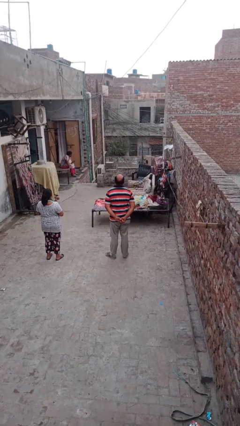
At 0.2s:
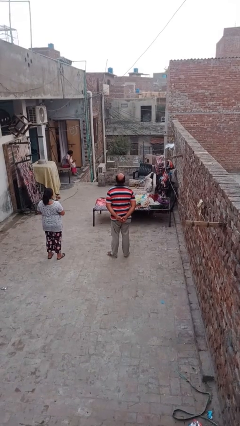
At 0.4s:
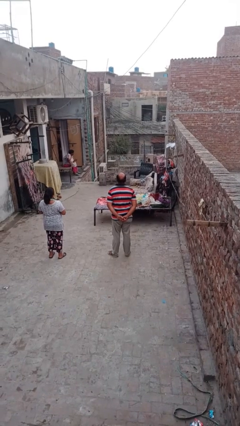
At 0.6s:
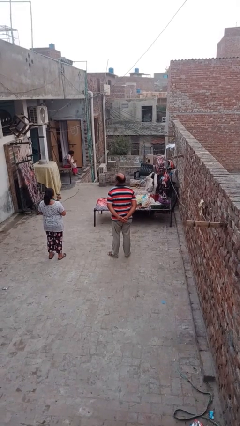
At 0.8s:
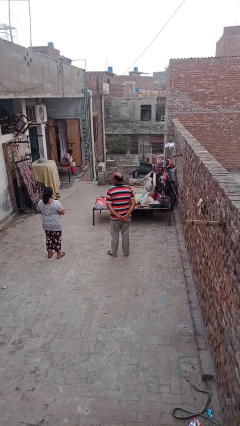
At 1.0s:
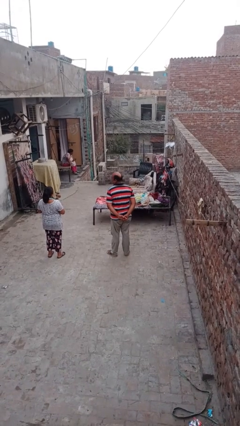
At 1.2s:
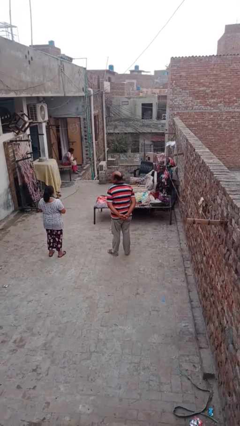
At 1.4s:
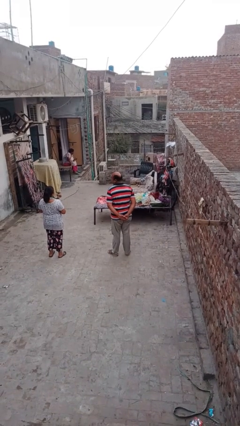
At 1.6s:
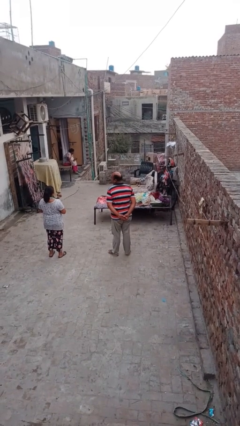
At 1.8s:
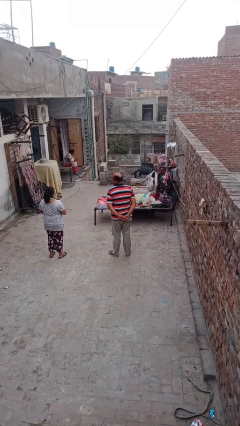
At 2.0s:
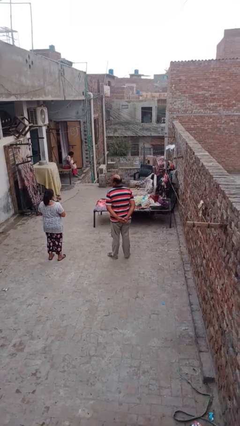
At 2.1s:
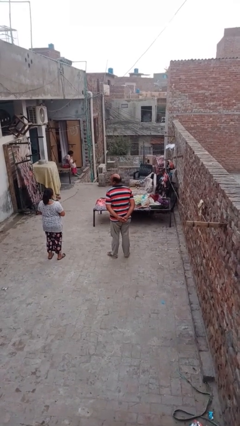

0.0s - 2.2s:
person looks over shoulder

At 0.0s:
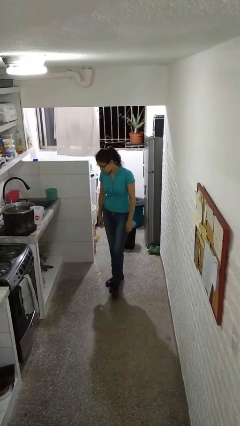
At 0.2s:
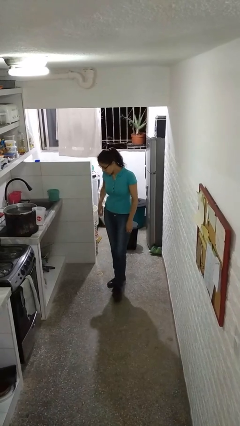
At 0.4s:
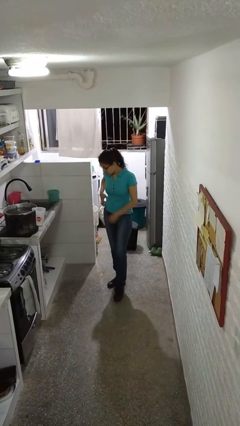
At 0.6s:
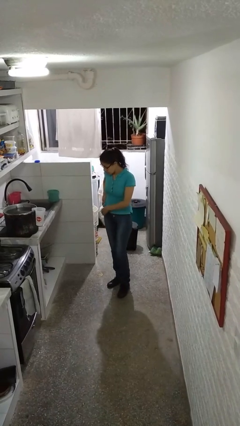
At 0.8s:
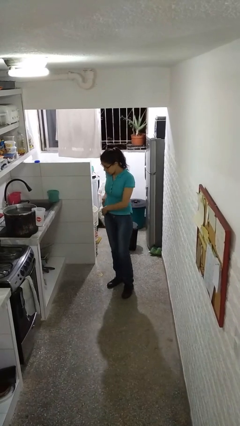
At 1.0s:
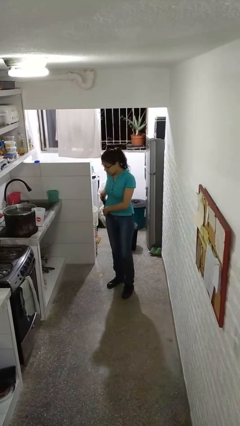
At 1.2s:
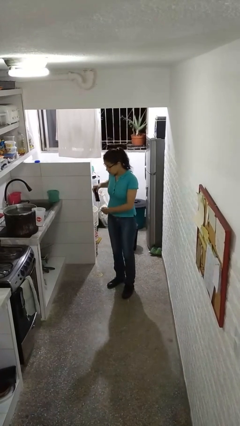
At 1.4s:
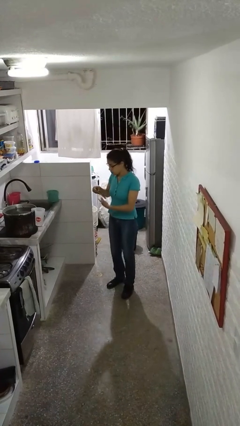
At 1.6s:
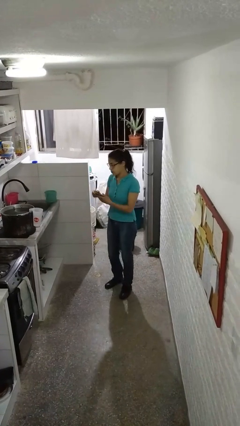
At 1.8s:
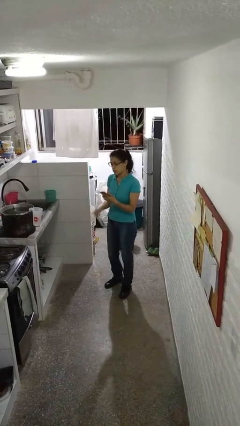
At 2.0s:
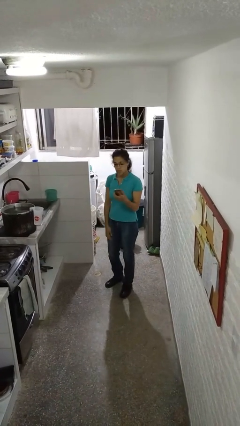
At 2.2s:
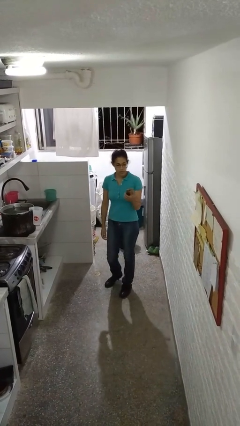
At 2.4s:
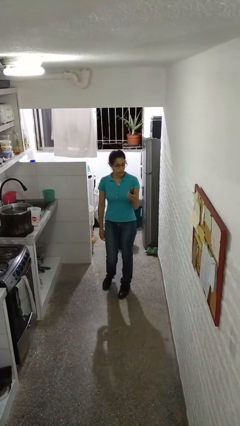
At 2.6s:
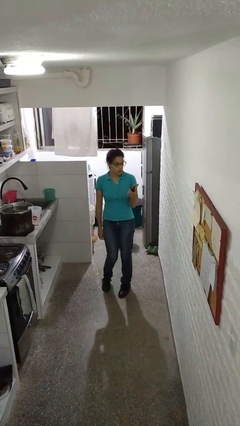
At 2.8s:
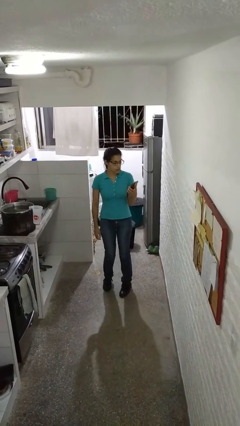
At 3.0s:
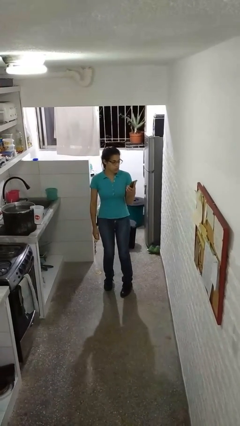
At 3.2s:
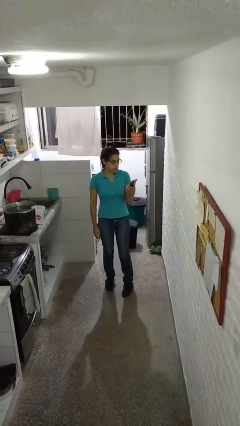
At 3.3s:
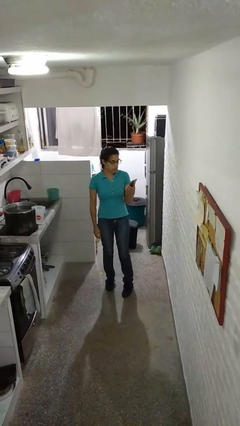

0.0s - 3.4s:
person takes phone from pocket

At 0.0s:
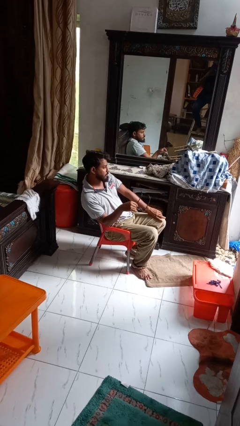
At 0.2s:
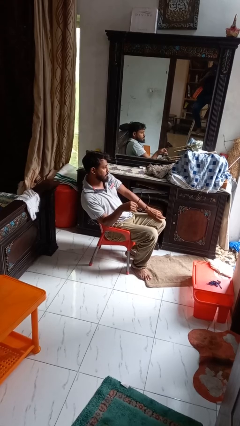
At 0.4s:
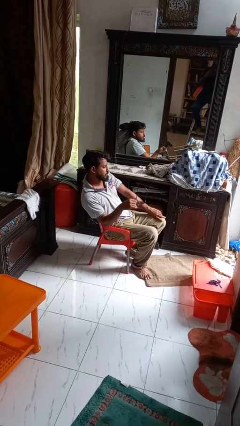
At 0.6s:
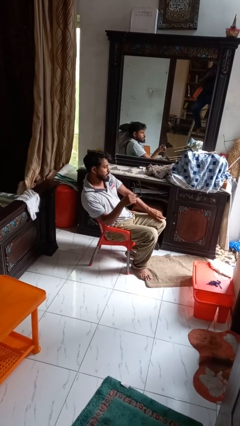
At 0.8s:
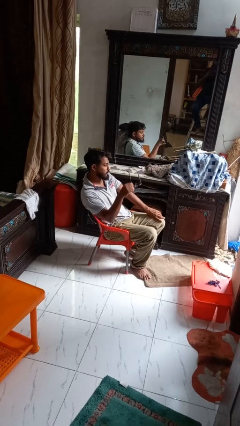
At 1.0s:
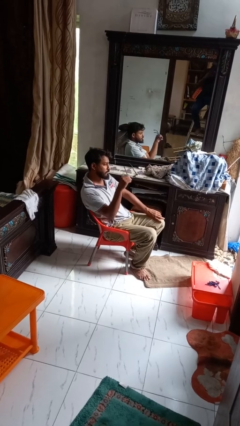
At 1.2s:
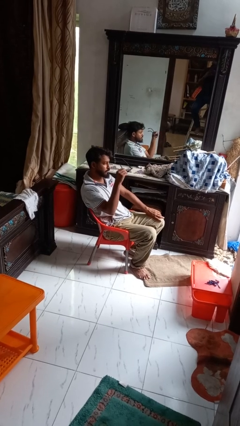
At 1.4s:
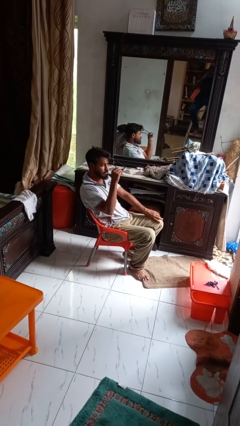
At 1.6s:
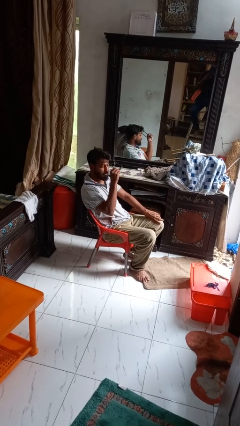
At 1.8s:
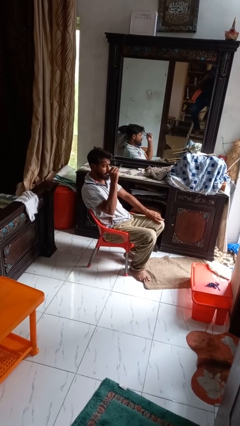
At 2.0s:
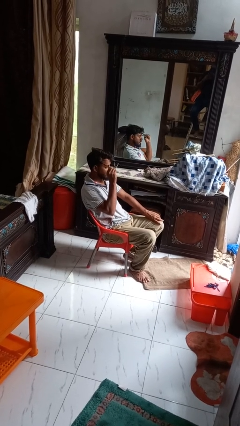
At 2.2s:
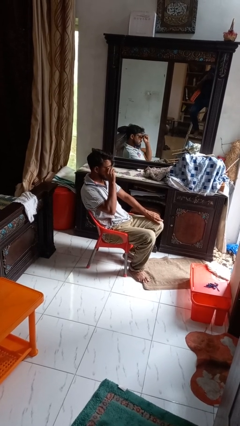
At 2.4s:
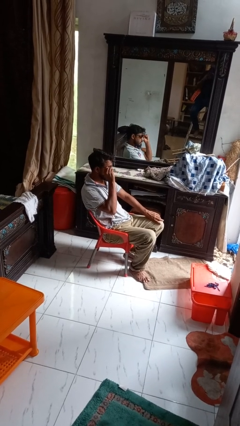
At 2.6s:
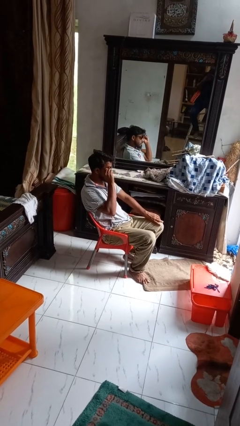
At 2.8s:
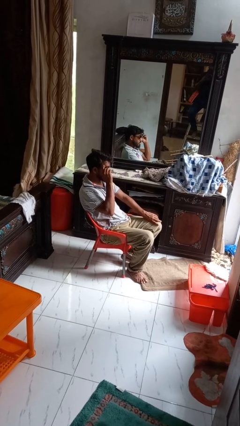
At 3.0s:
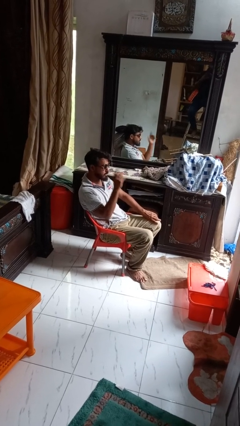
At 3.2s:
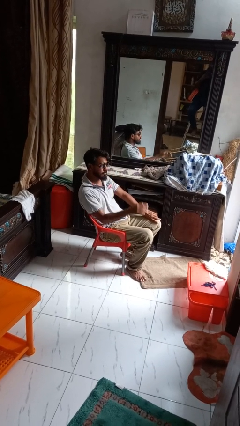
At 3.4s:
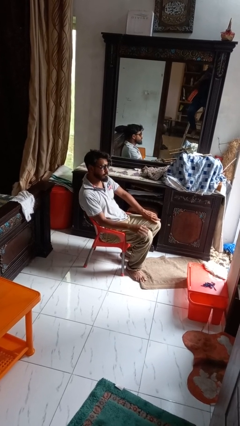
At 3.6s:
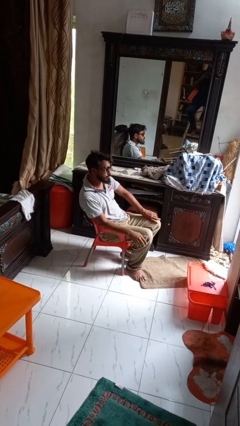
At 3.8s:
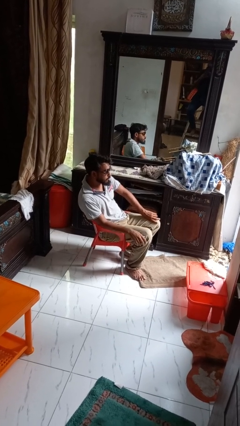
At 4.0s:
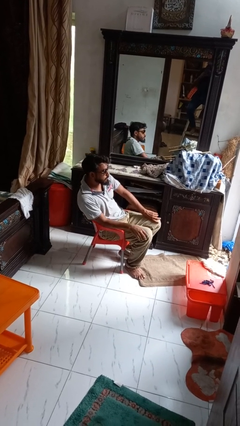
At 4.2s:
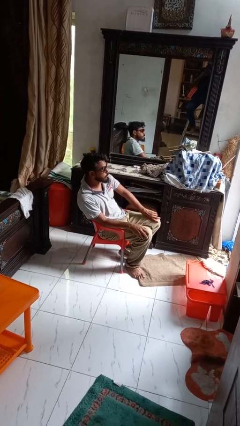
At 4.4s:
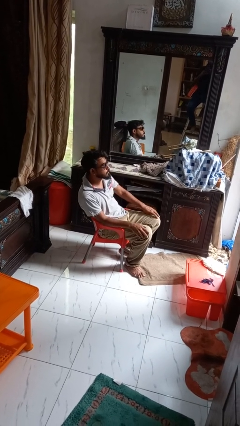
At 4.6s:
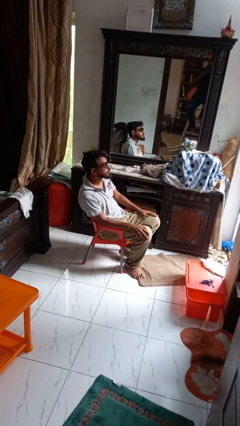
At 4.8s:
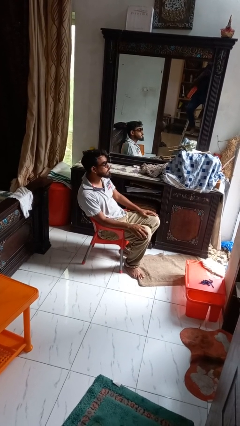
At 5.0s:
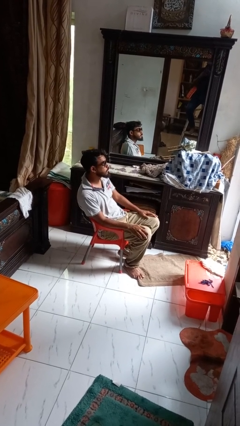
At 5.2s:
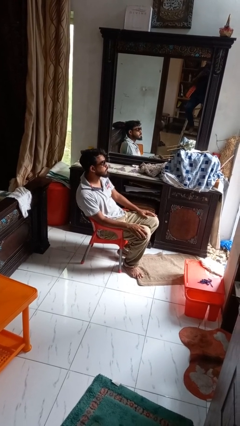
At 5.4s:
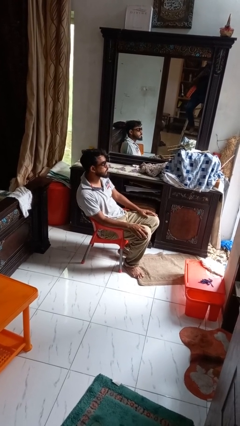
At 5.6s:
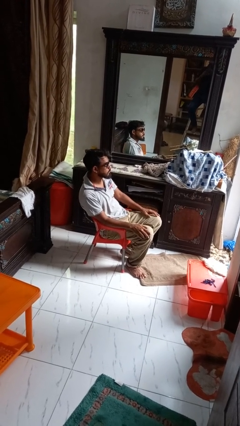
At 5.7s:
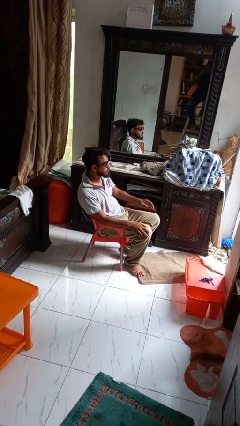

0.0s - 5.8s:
person puts on sunglasses

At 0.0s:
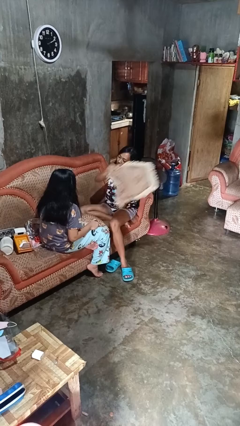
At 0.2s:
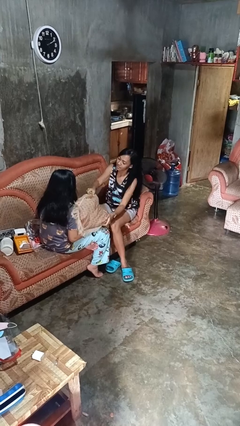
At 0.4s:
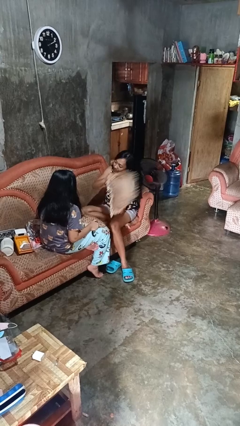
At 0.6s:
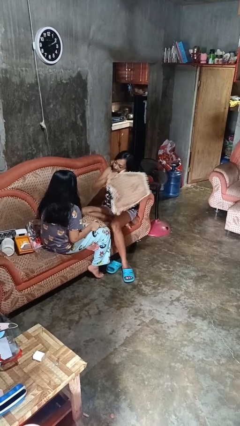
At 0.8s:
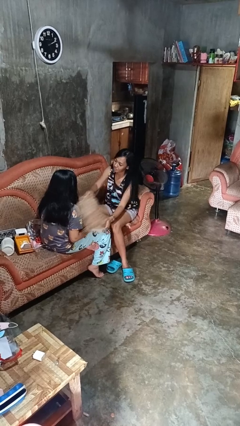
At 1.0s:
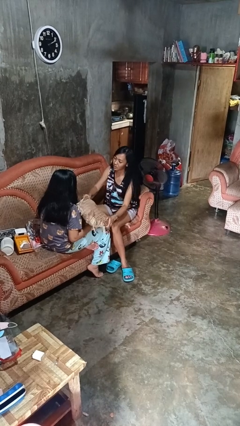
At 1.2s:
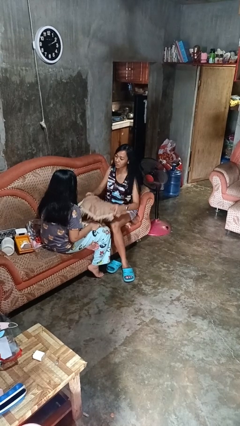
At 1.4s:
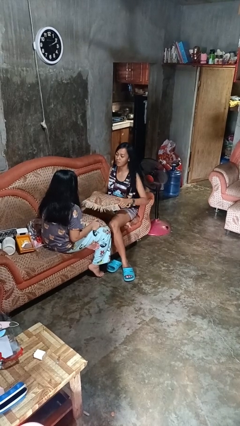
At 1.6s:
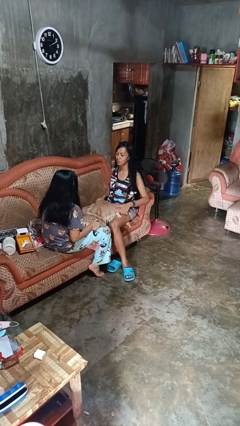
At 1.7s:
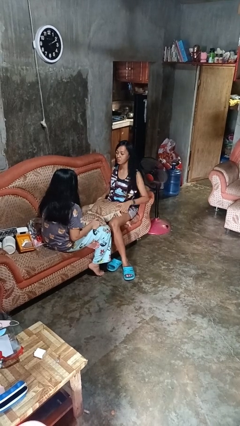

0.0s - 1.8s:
person hits person with pillow

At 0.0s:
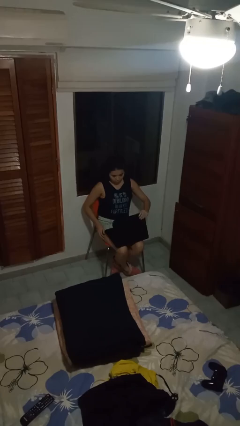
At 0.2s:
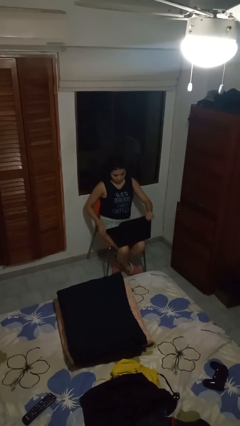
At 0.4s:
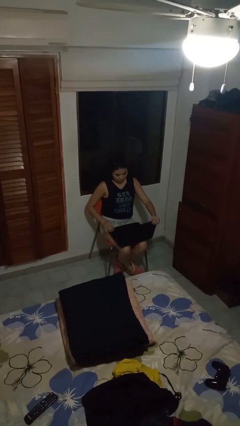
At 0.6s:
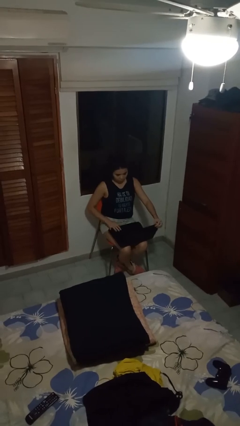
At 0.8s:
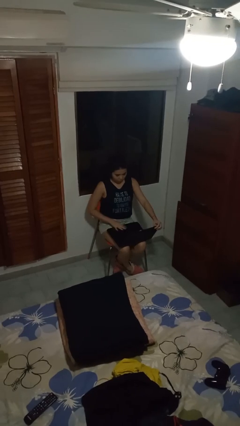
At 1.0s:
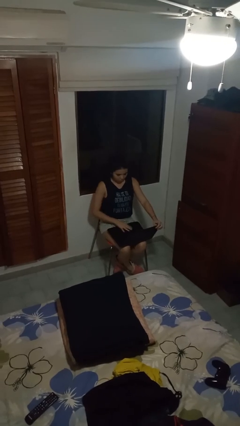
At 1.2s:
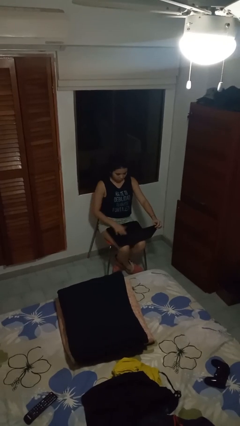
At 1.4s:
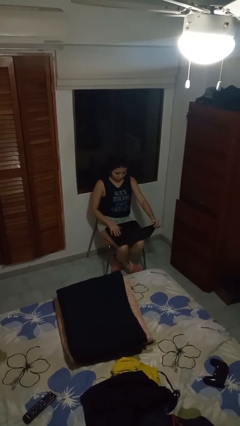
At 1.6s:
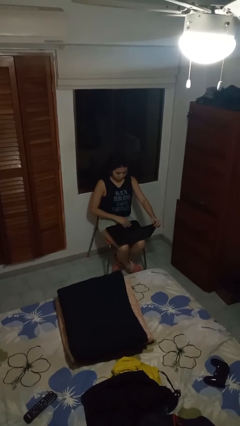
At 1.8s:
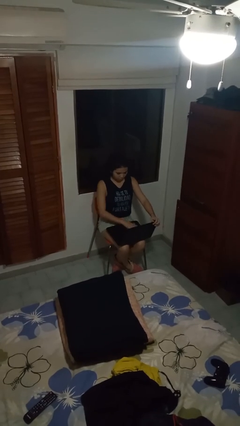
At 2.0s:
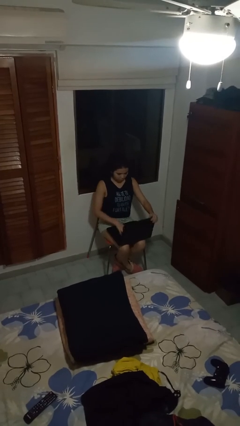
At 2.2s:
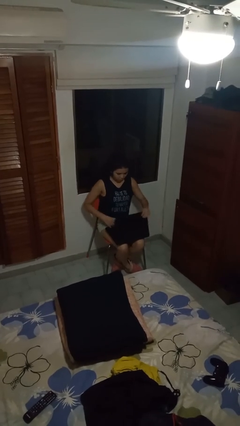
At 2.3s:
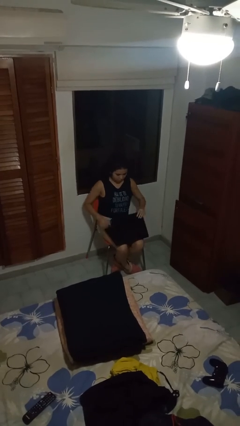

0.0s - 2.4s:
person interacts with laptop

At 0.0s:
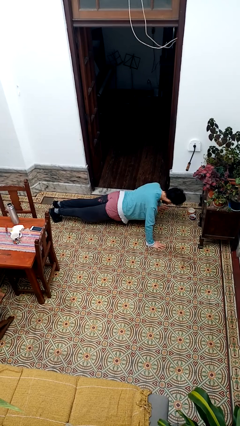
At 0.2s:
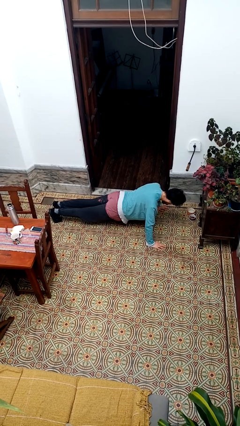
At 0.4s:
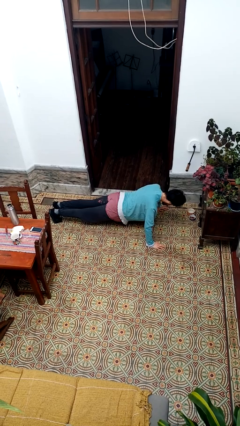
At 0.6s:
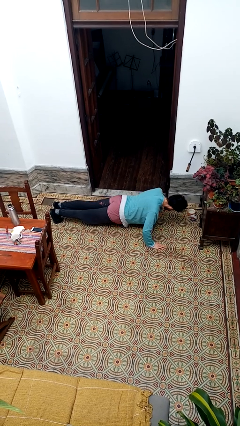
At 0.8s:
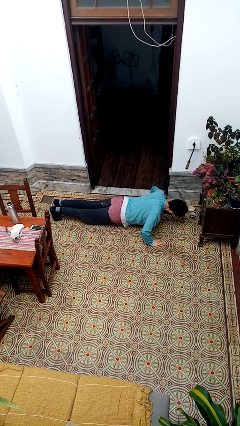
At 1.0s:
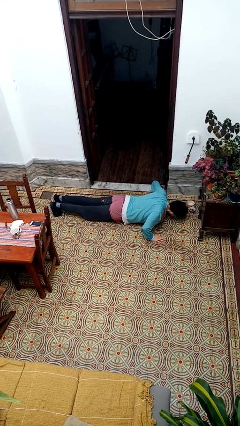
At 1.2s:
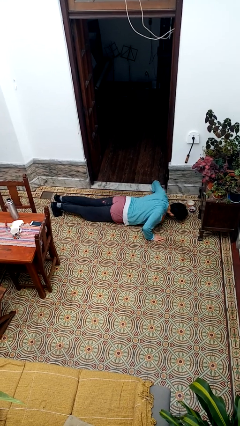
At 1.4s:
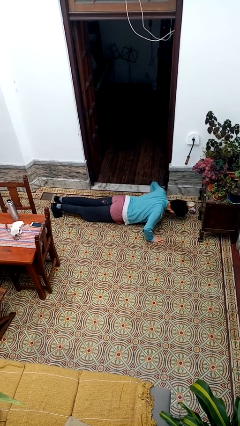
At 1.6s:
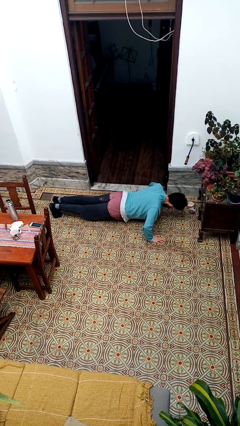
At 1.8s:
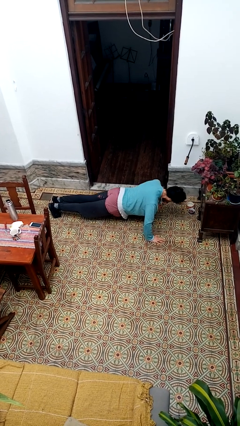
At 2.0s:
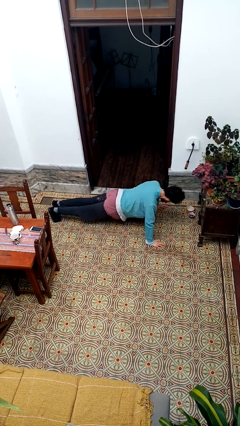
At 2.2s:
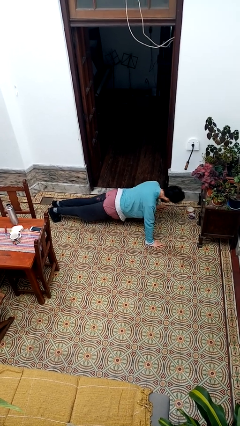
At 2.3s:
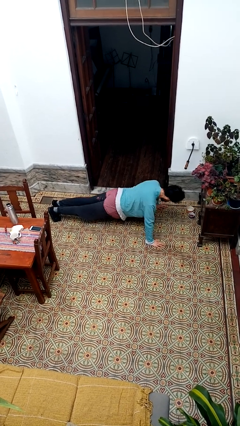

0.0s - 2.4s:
person exercises with pushup
